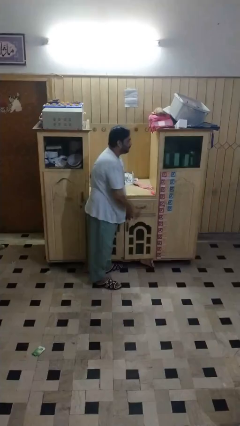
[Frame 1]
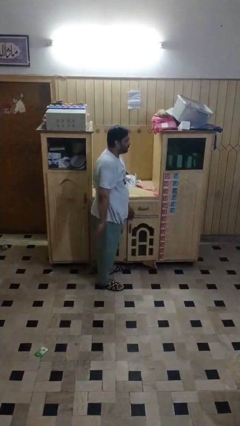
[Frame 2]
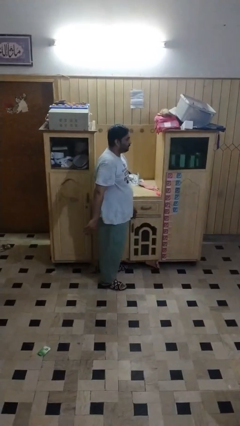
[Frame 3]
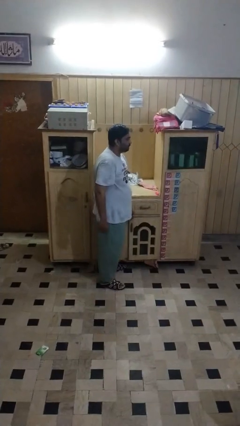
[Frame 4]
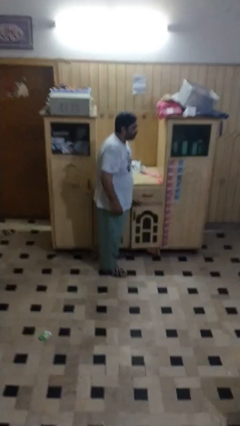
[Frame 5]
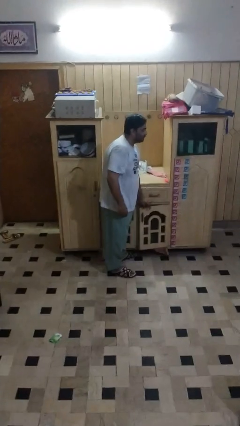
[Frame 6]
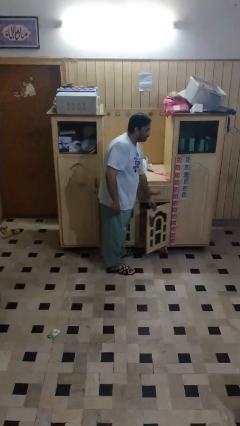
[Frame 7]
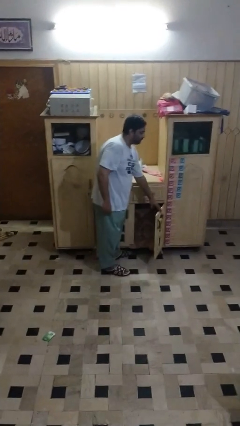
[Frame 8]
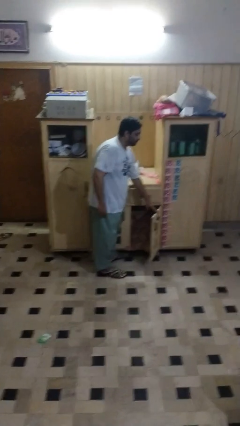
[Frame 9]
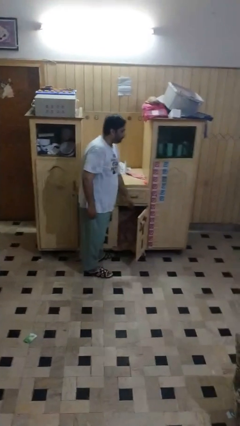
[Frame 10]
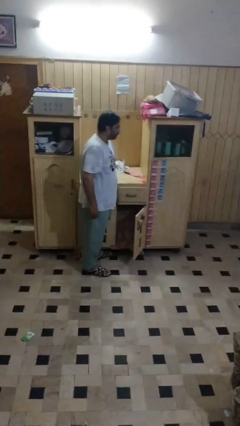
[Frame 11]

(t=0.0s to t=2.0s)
person closes cabinet

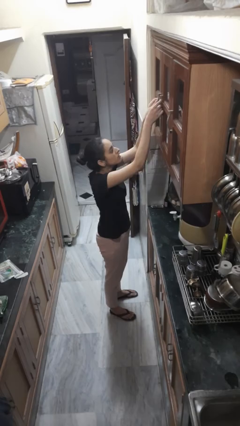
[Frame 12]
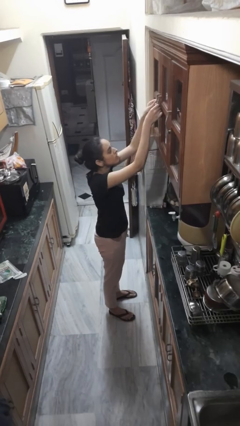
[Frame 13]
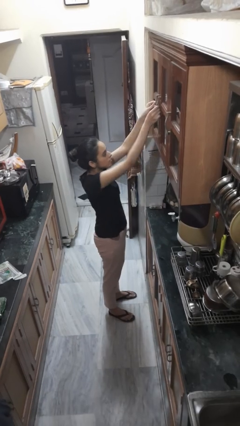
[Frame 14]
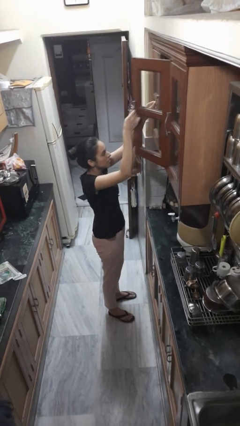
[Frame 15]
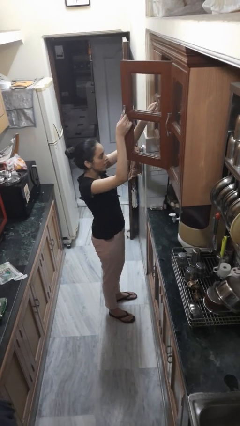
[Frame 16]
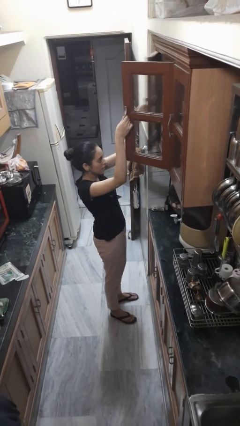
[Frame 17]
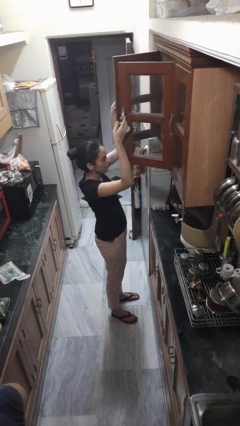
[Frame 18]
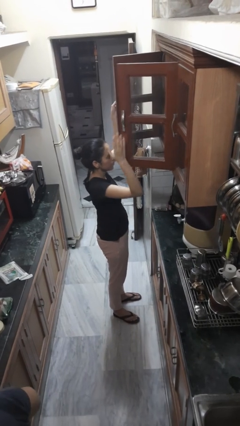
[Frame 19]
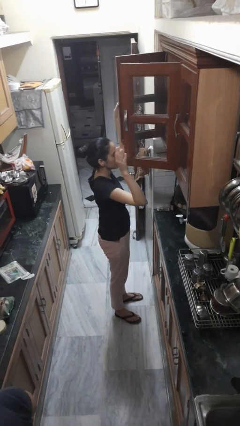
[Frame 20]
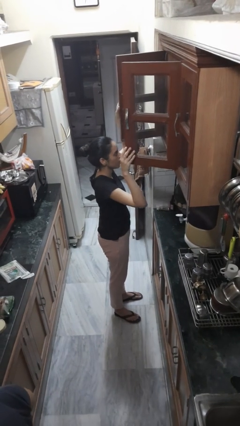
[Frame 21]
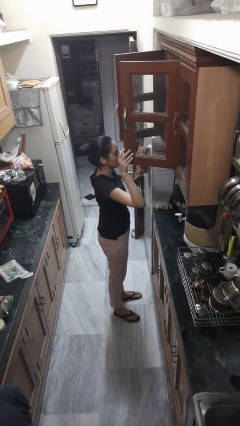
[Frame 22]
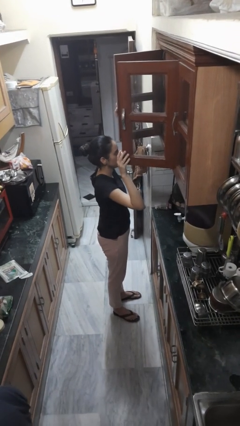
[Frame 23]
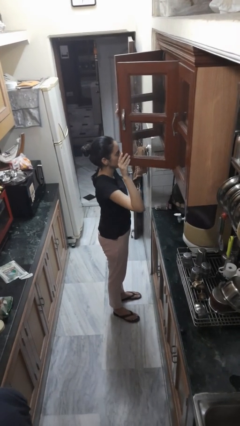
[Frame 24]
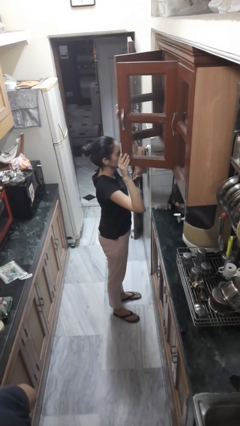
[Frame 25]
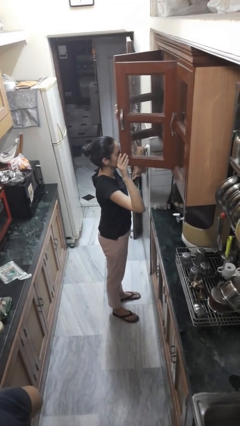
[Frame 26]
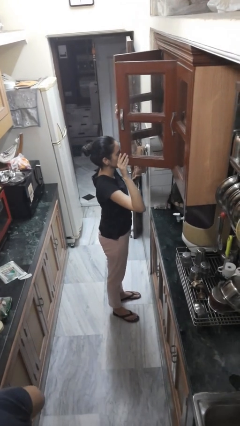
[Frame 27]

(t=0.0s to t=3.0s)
person opens cabinet

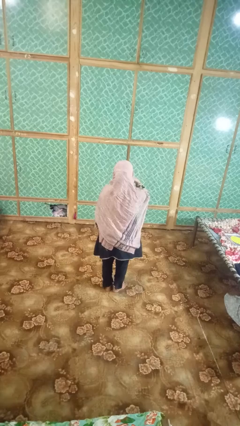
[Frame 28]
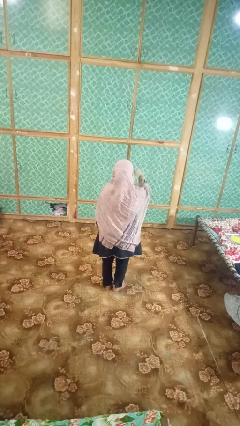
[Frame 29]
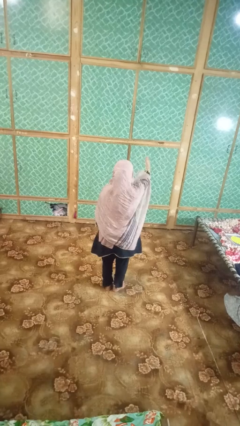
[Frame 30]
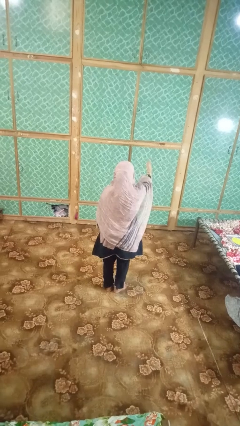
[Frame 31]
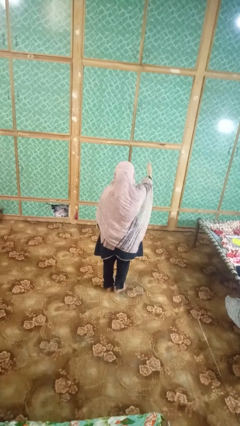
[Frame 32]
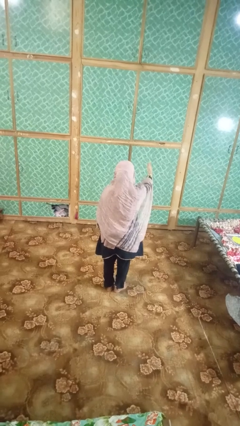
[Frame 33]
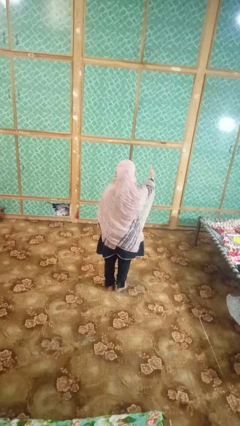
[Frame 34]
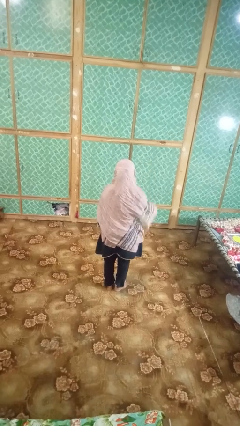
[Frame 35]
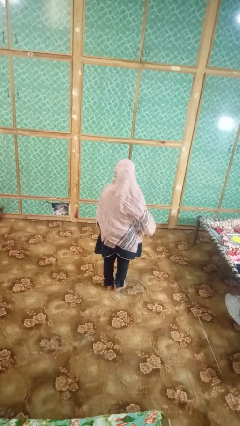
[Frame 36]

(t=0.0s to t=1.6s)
person gestures blow kiss

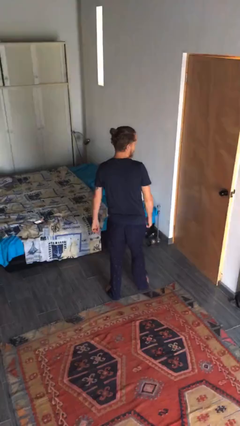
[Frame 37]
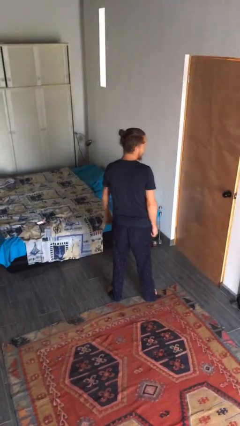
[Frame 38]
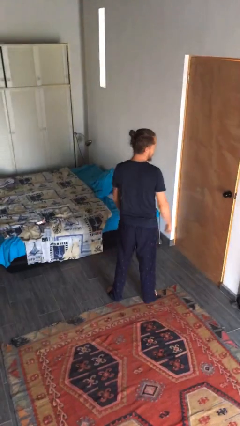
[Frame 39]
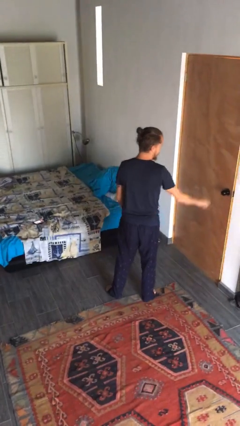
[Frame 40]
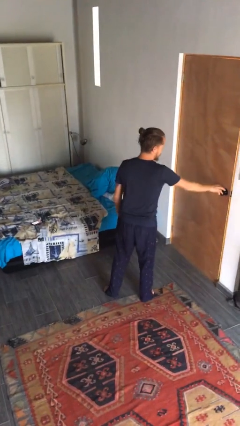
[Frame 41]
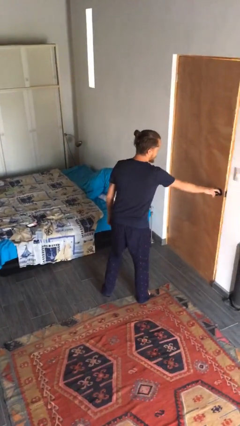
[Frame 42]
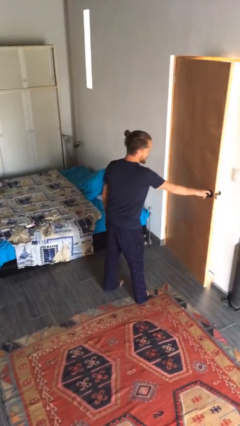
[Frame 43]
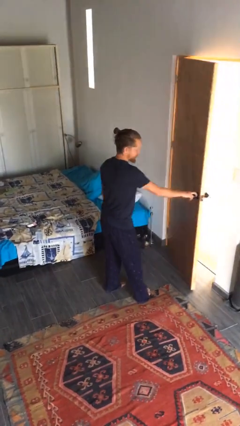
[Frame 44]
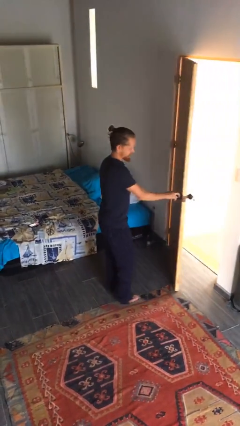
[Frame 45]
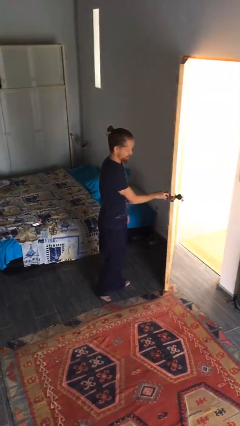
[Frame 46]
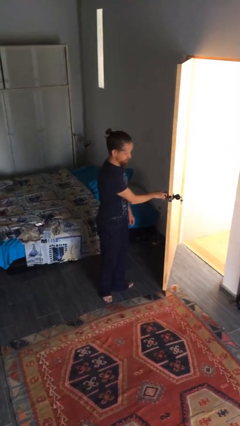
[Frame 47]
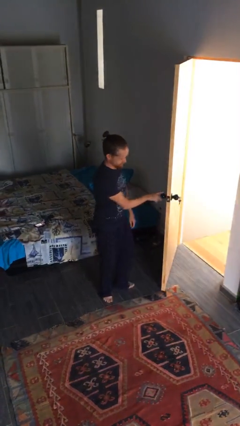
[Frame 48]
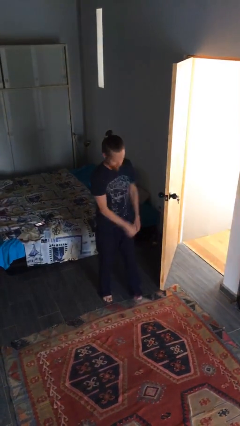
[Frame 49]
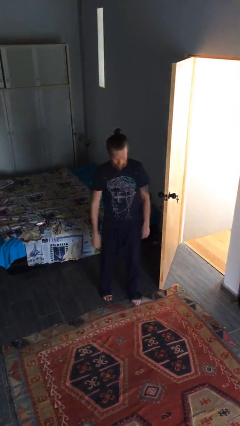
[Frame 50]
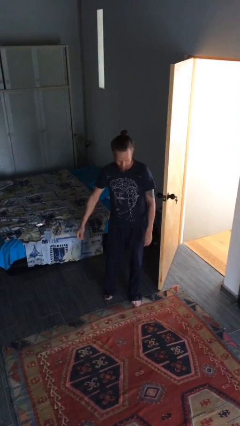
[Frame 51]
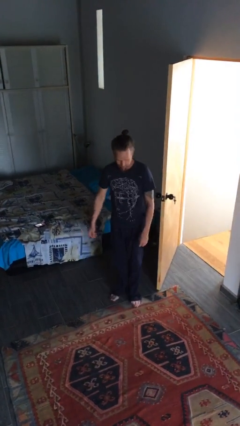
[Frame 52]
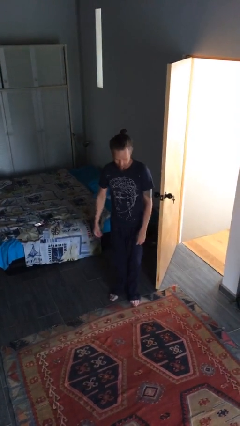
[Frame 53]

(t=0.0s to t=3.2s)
person opens facility door

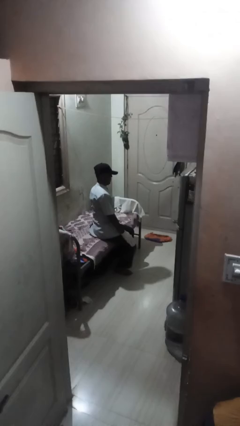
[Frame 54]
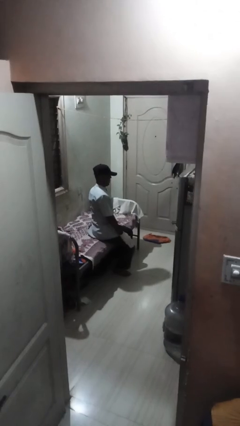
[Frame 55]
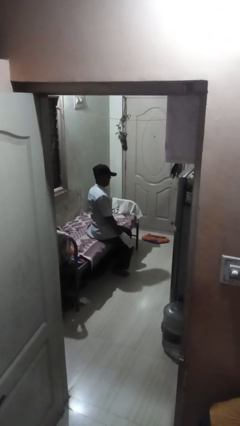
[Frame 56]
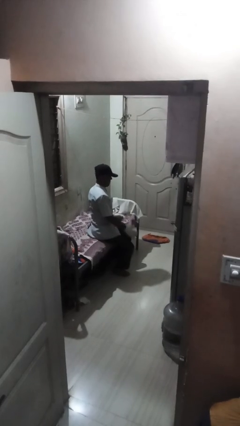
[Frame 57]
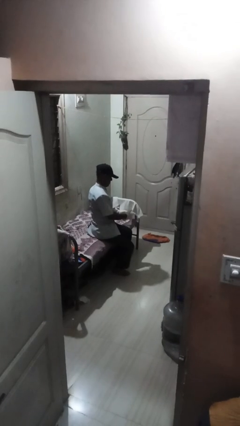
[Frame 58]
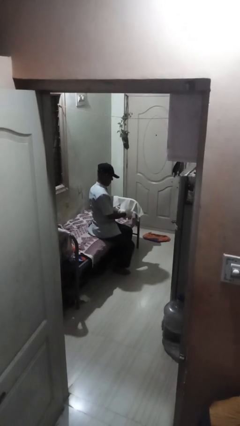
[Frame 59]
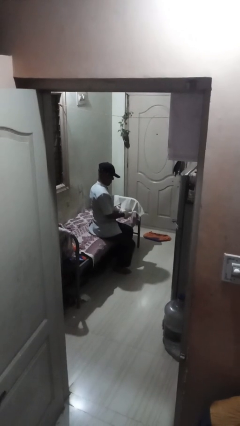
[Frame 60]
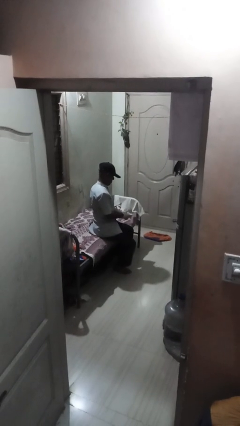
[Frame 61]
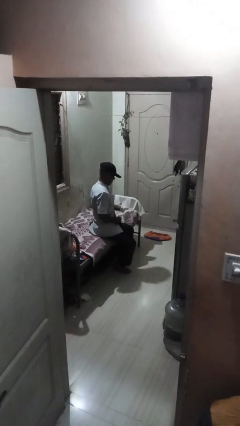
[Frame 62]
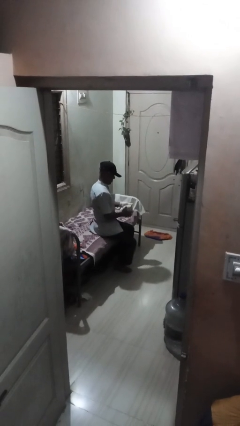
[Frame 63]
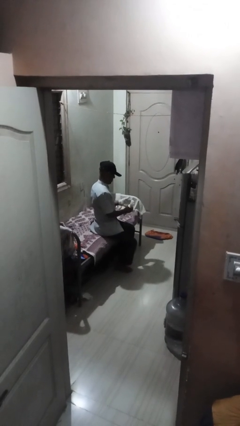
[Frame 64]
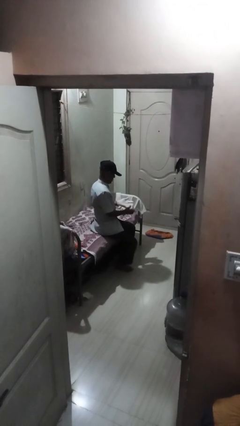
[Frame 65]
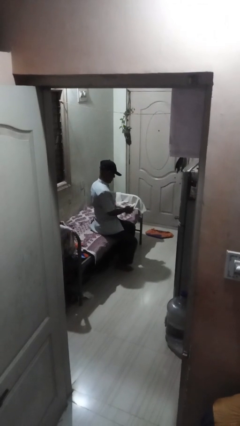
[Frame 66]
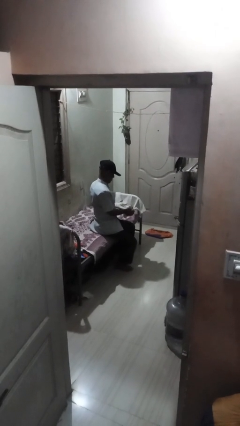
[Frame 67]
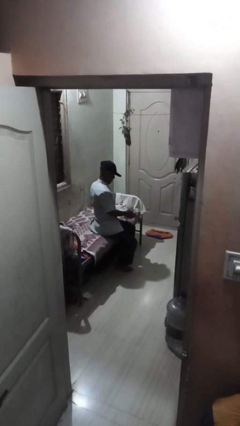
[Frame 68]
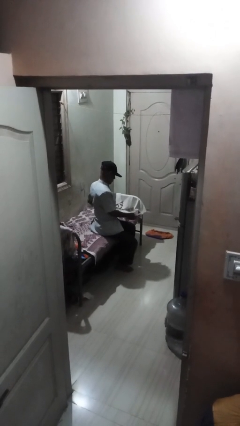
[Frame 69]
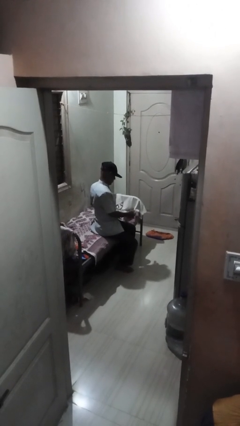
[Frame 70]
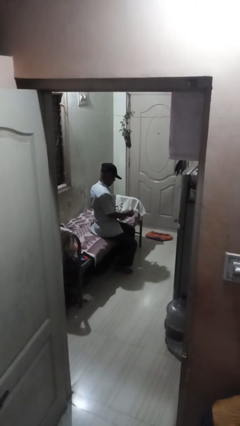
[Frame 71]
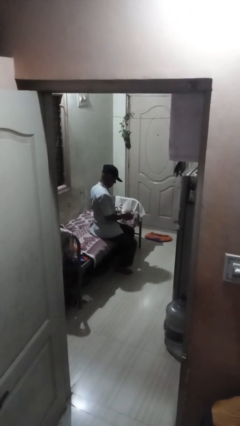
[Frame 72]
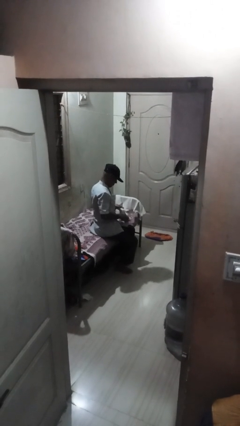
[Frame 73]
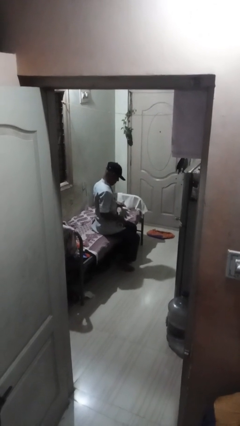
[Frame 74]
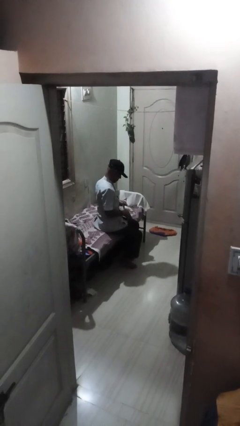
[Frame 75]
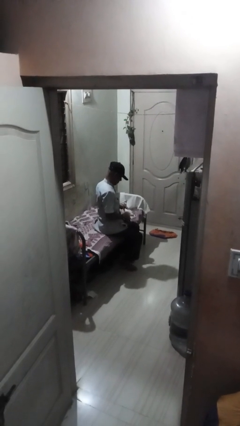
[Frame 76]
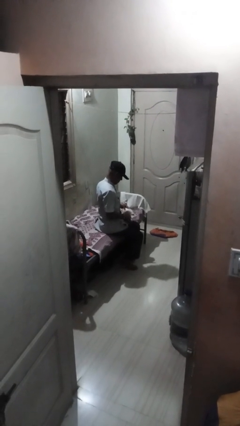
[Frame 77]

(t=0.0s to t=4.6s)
person takes off gloves

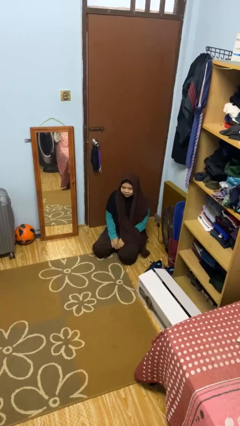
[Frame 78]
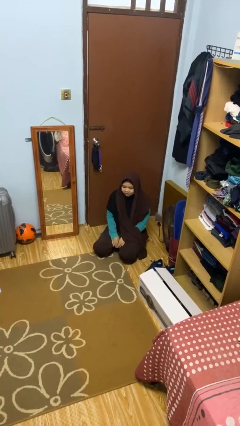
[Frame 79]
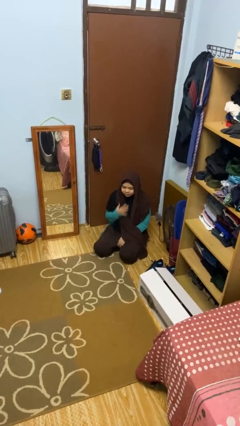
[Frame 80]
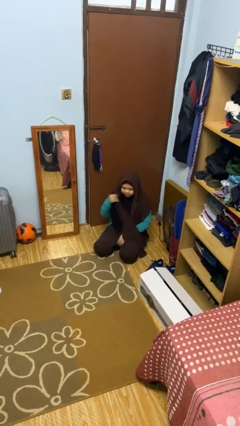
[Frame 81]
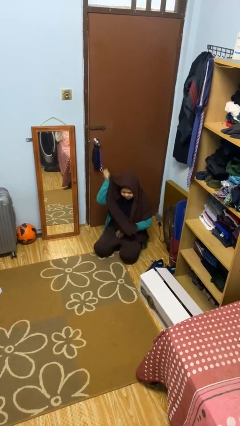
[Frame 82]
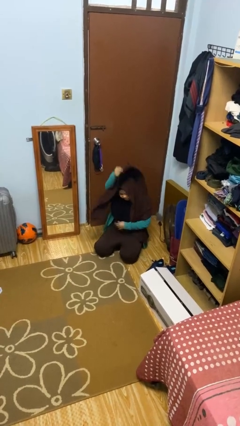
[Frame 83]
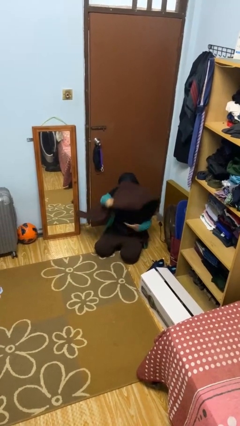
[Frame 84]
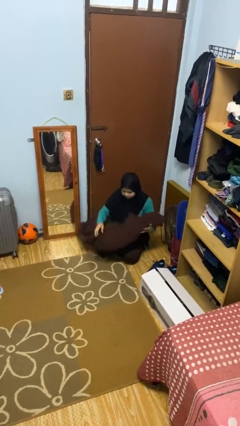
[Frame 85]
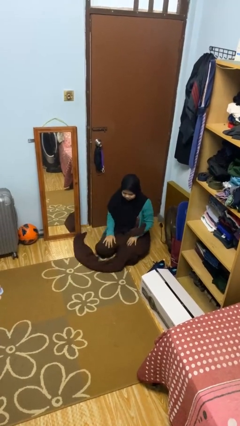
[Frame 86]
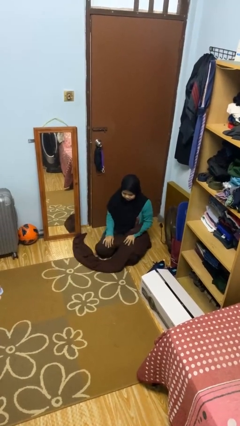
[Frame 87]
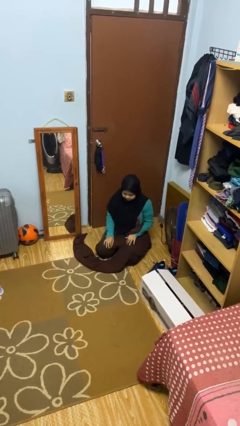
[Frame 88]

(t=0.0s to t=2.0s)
person takes off scarf

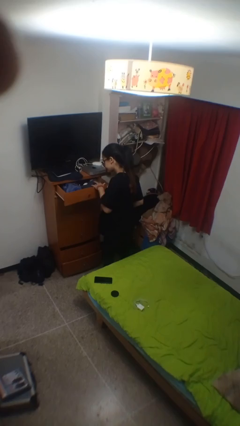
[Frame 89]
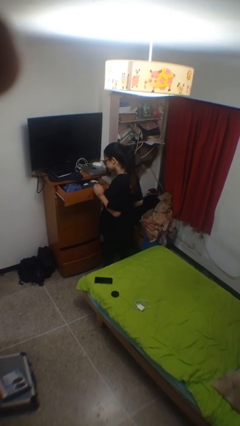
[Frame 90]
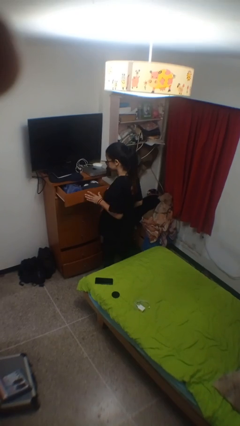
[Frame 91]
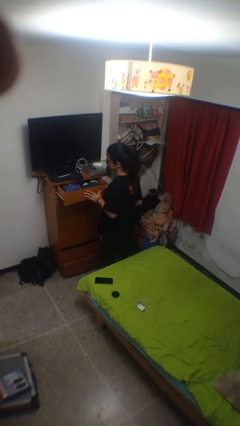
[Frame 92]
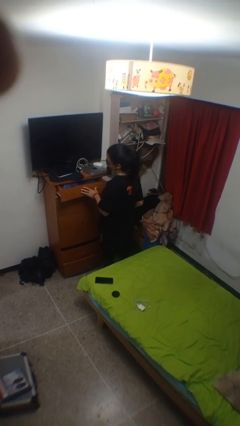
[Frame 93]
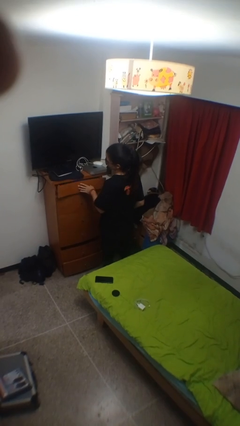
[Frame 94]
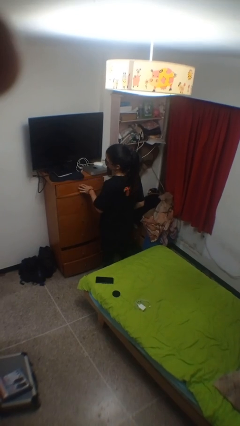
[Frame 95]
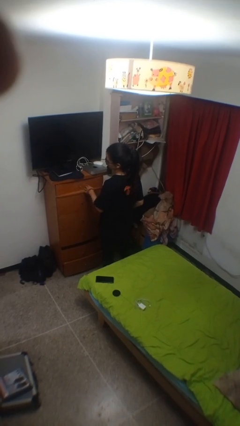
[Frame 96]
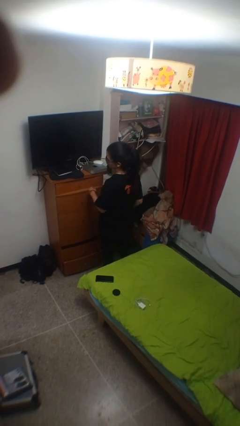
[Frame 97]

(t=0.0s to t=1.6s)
person closes dresser drawer
